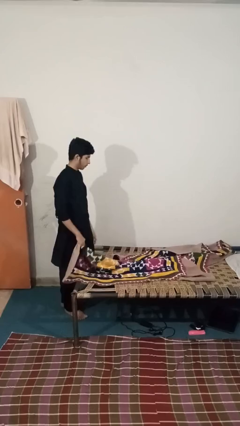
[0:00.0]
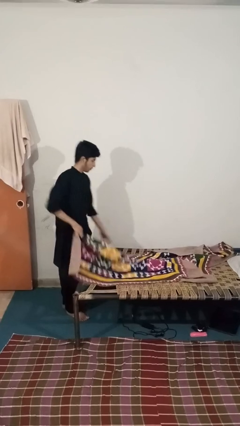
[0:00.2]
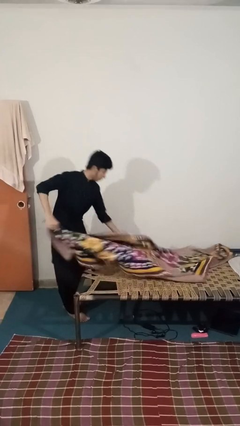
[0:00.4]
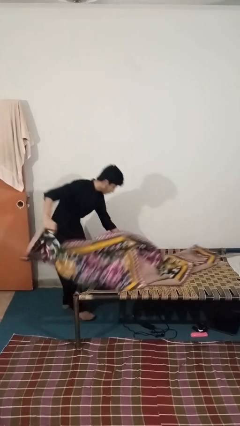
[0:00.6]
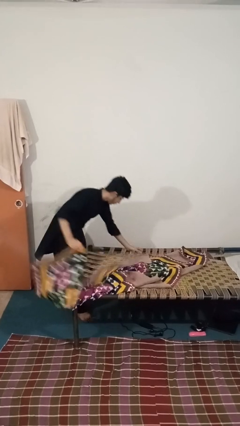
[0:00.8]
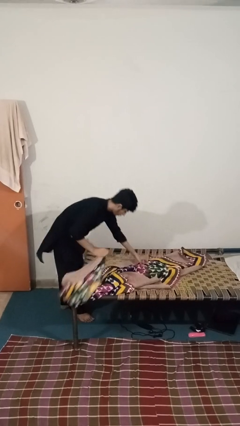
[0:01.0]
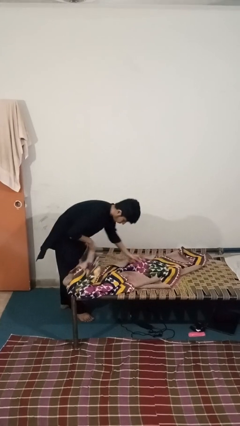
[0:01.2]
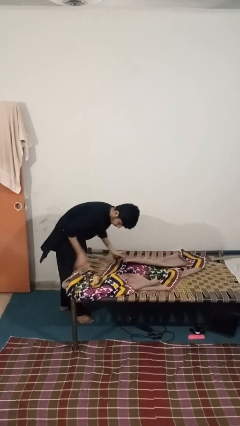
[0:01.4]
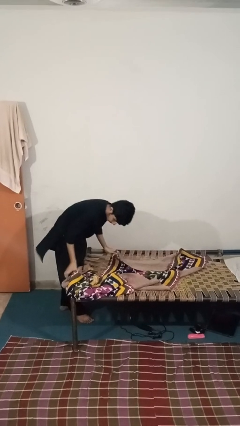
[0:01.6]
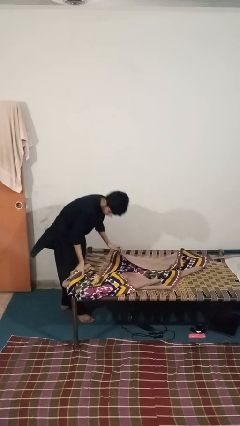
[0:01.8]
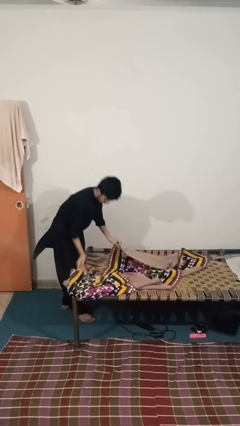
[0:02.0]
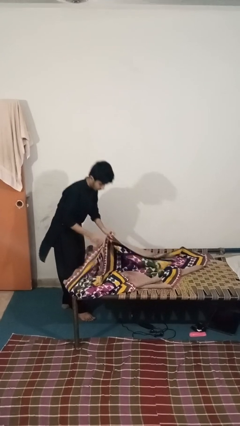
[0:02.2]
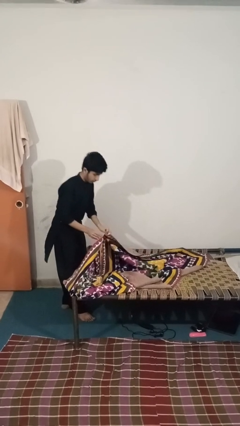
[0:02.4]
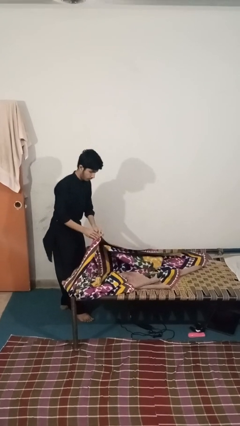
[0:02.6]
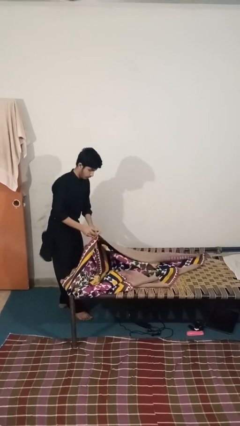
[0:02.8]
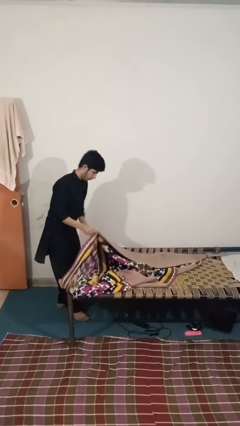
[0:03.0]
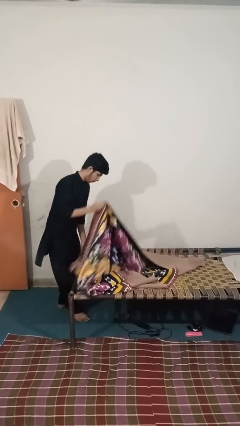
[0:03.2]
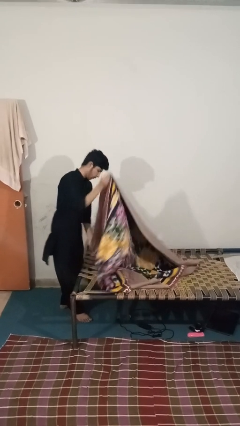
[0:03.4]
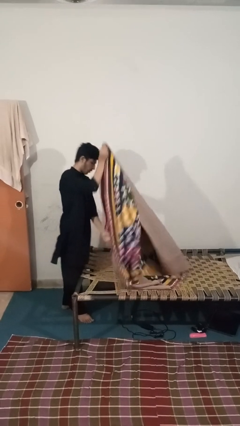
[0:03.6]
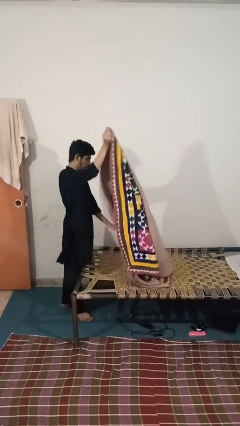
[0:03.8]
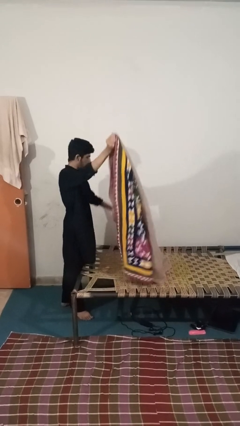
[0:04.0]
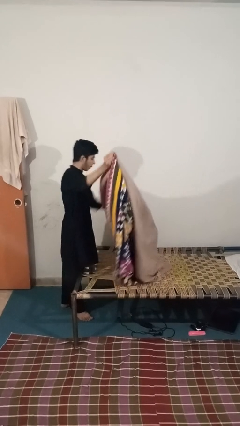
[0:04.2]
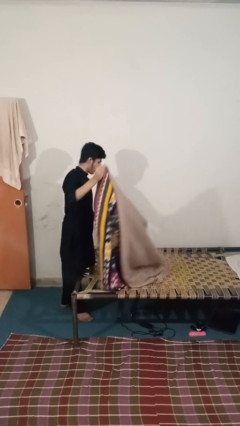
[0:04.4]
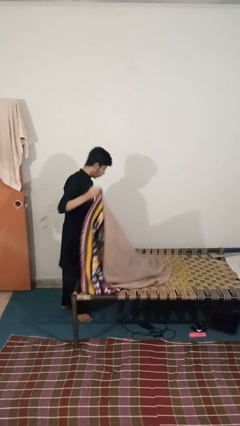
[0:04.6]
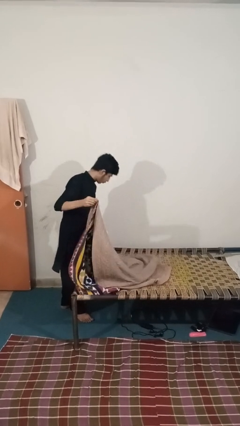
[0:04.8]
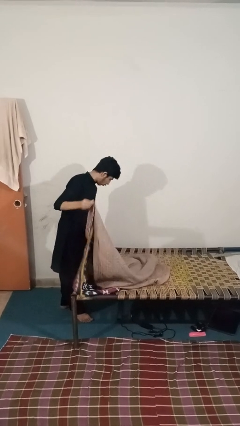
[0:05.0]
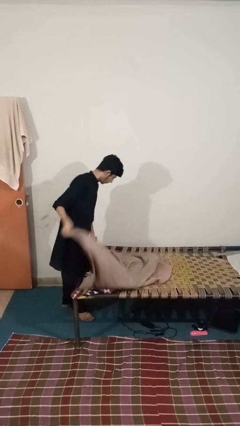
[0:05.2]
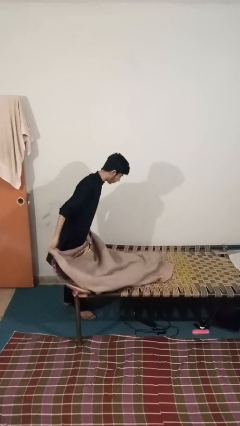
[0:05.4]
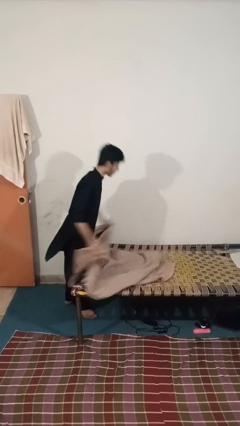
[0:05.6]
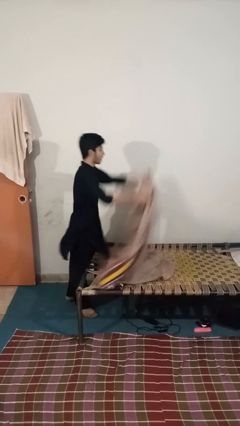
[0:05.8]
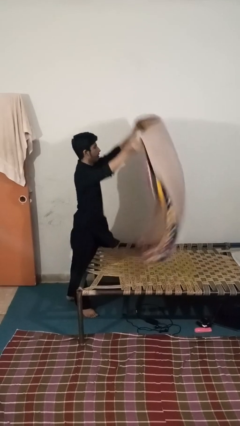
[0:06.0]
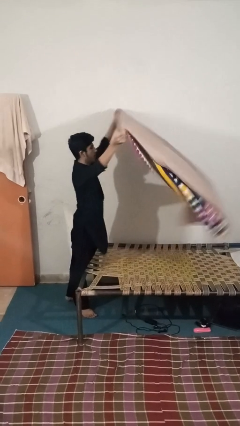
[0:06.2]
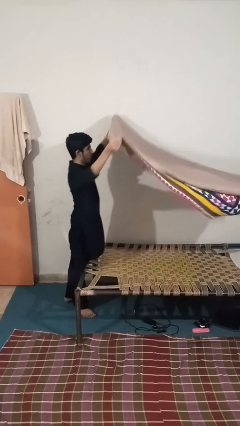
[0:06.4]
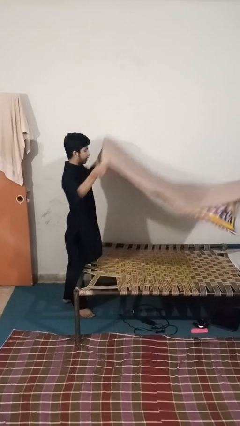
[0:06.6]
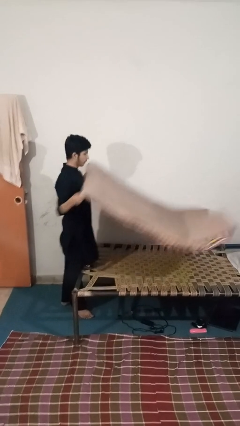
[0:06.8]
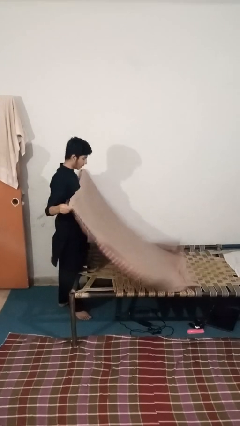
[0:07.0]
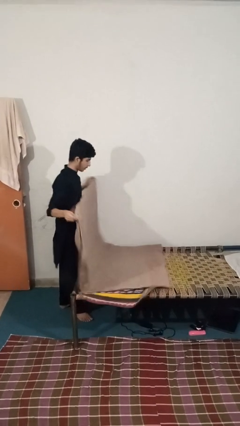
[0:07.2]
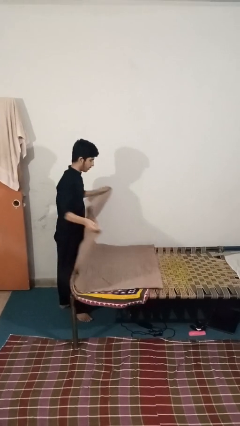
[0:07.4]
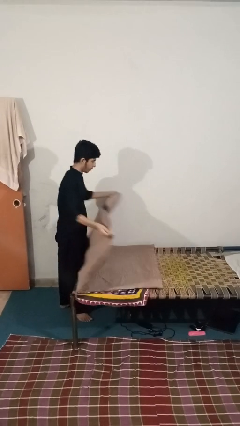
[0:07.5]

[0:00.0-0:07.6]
person folds blanket

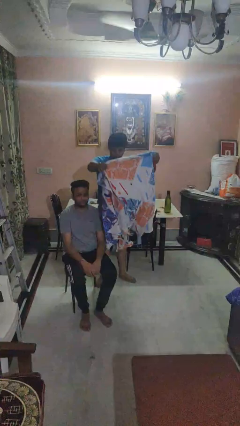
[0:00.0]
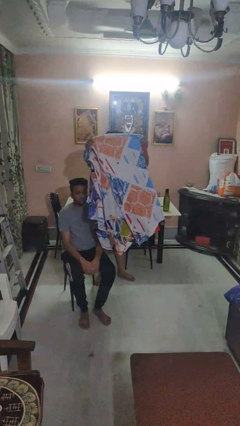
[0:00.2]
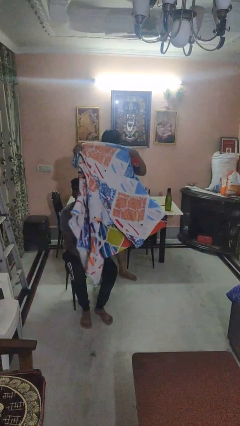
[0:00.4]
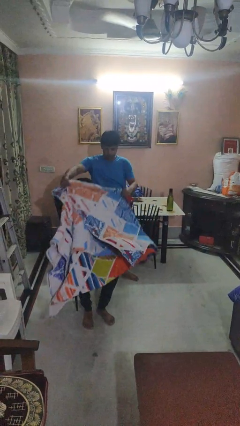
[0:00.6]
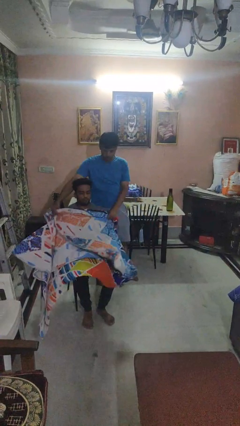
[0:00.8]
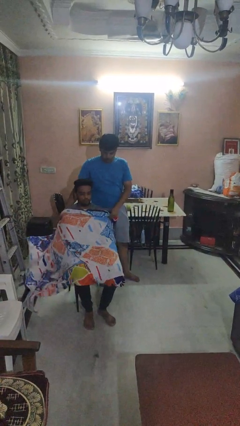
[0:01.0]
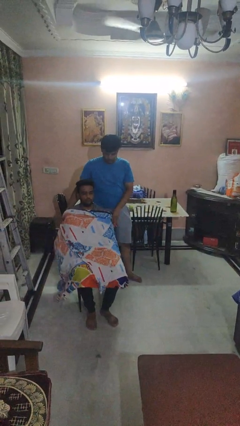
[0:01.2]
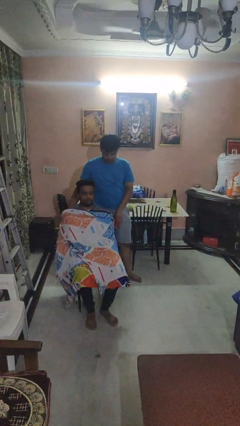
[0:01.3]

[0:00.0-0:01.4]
person covers friend with blanket

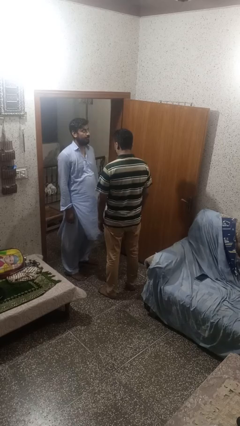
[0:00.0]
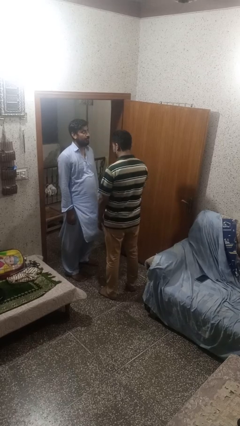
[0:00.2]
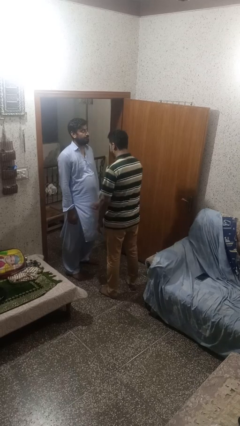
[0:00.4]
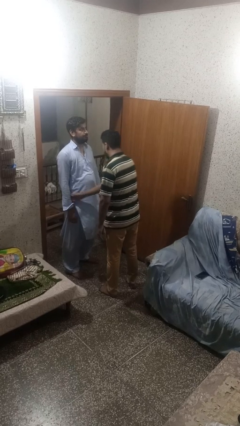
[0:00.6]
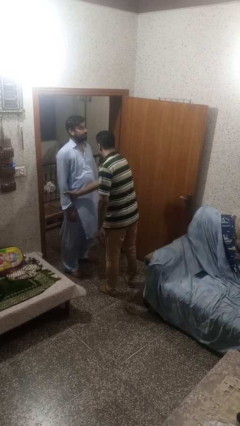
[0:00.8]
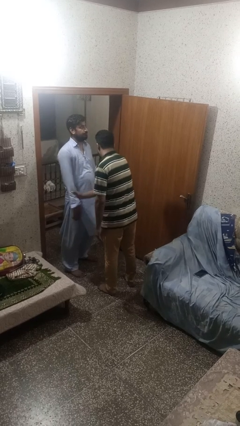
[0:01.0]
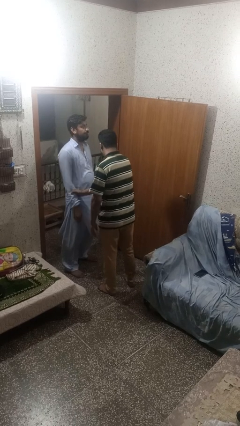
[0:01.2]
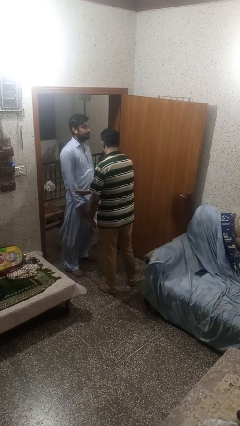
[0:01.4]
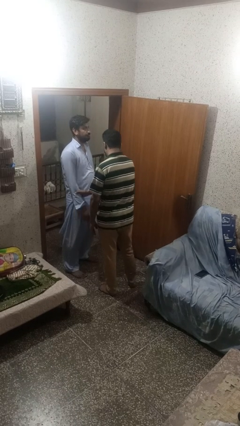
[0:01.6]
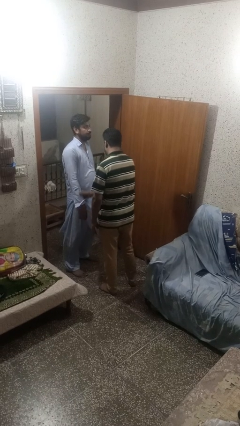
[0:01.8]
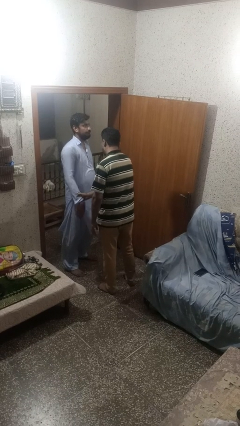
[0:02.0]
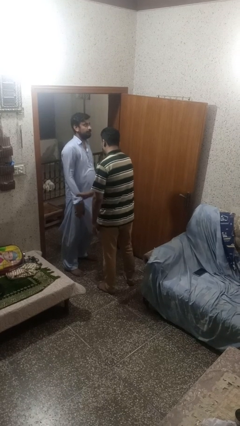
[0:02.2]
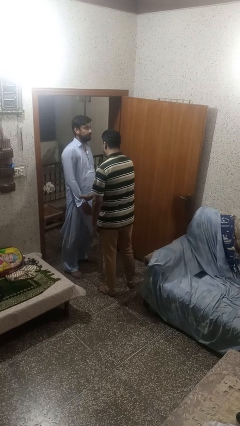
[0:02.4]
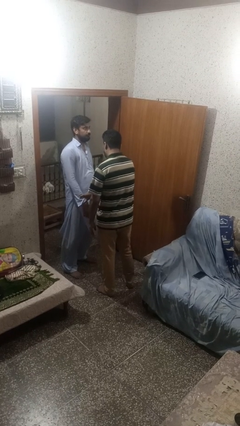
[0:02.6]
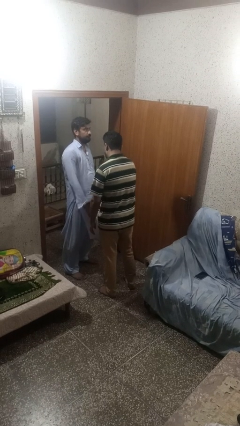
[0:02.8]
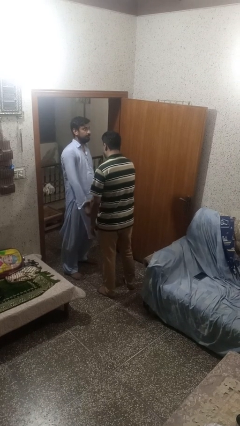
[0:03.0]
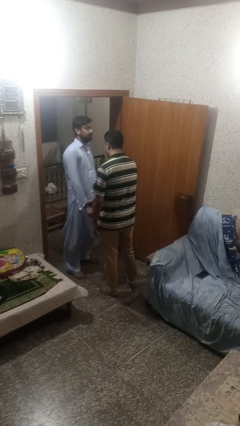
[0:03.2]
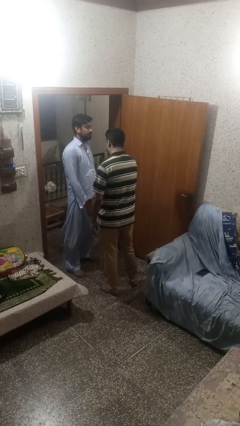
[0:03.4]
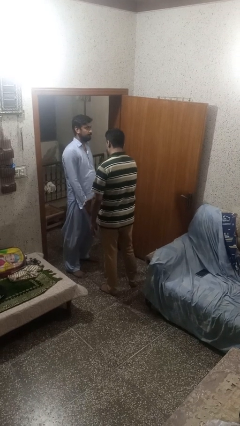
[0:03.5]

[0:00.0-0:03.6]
person grabs person by forearm

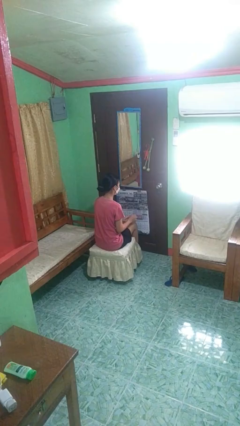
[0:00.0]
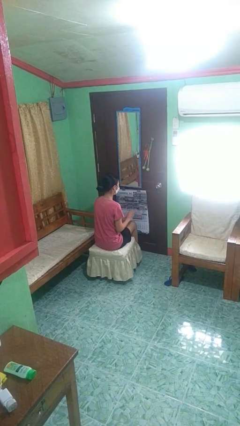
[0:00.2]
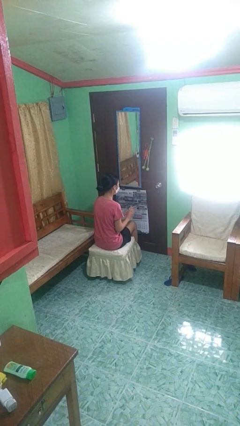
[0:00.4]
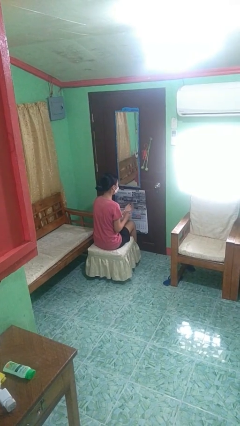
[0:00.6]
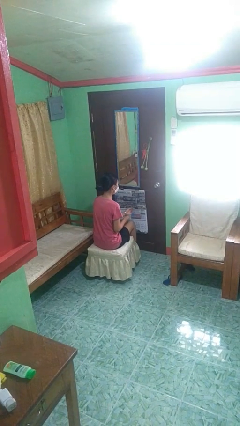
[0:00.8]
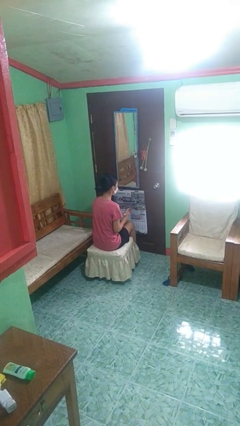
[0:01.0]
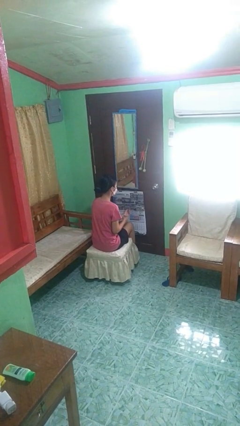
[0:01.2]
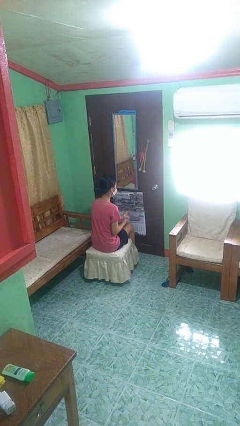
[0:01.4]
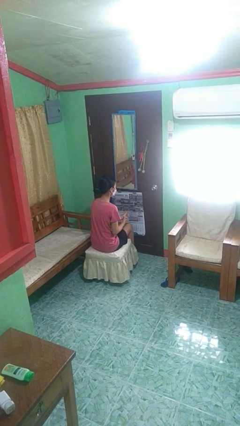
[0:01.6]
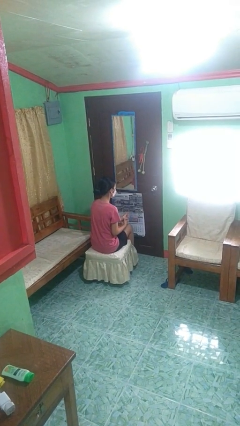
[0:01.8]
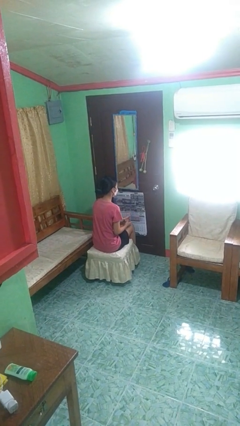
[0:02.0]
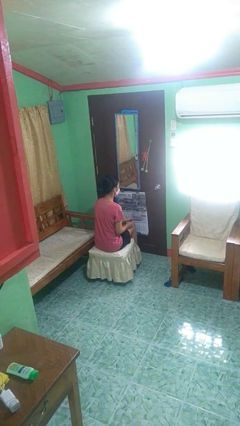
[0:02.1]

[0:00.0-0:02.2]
person puts on wristwatch

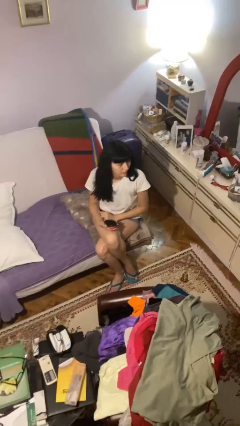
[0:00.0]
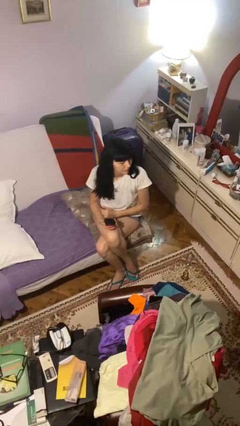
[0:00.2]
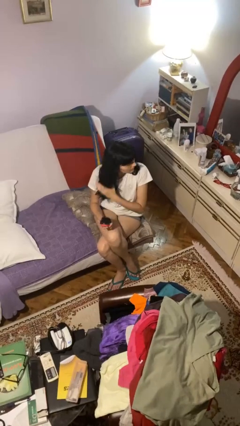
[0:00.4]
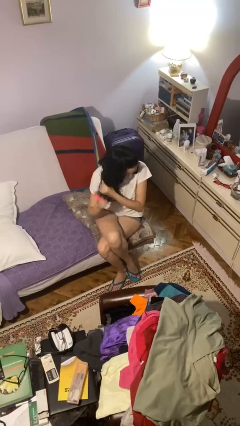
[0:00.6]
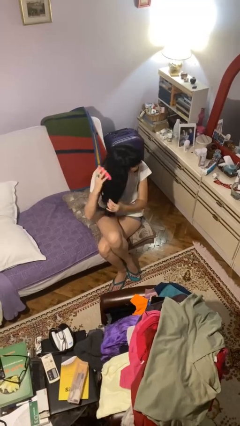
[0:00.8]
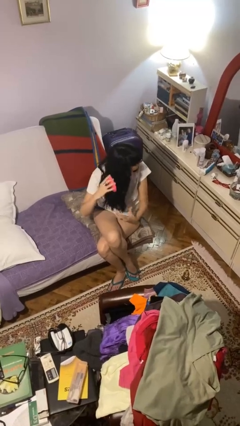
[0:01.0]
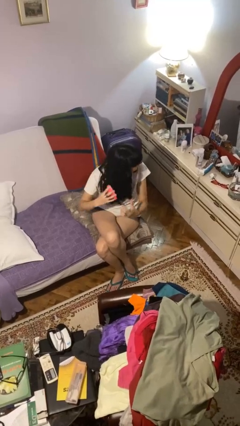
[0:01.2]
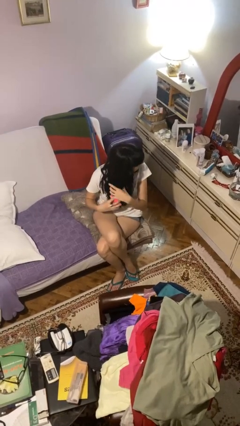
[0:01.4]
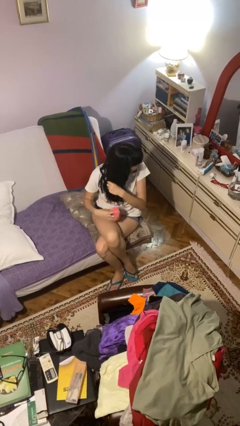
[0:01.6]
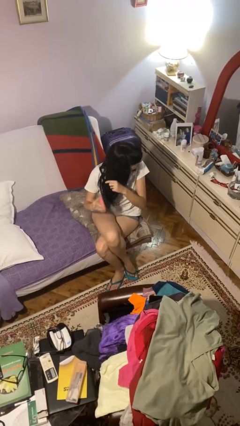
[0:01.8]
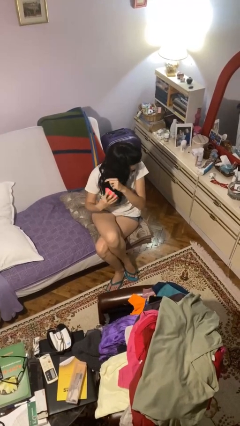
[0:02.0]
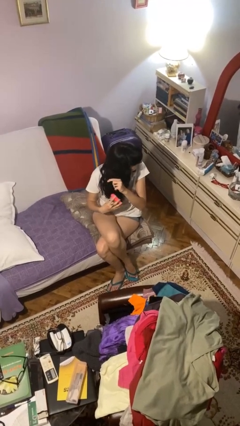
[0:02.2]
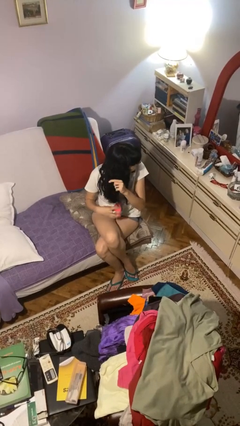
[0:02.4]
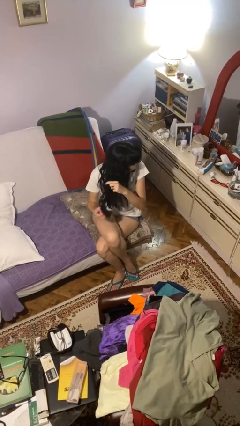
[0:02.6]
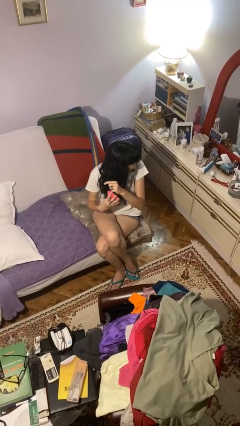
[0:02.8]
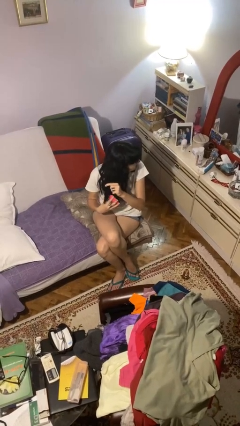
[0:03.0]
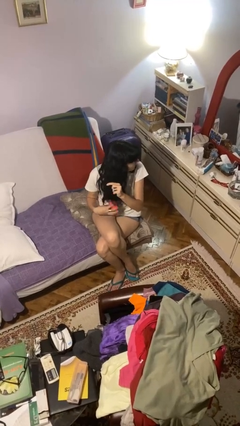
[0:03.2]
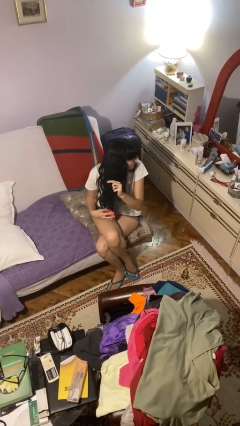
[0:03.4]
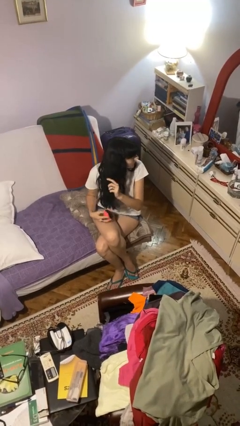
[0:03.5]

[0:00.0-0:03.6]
person brushes hair
